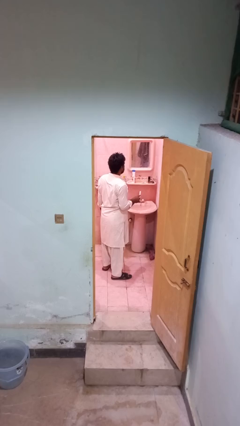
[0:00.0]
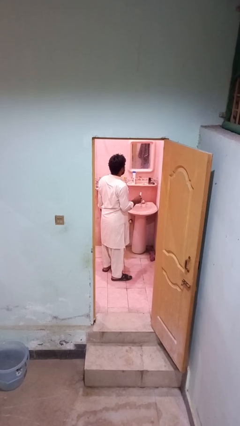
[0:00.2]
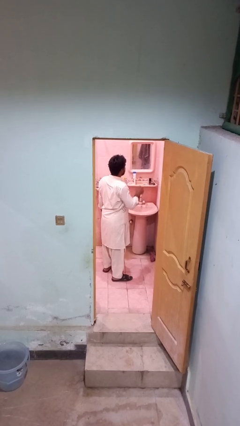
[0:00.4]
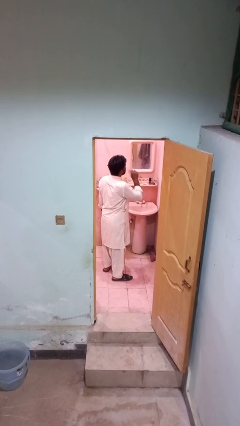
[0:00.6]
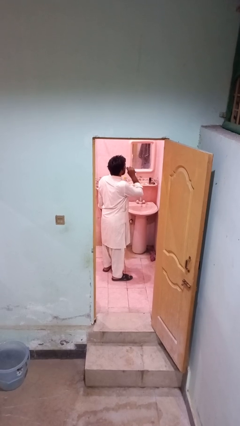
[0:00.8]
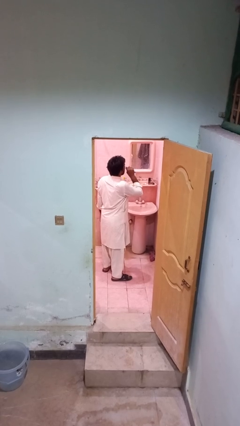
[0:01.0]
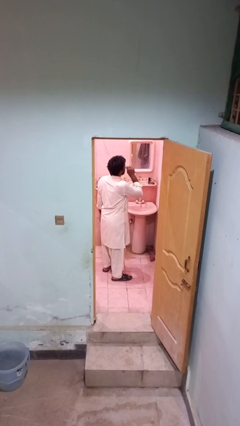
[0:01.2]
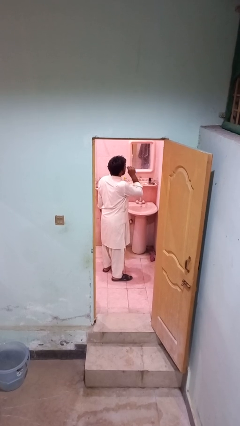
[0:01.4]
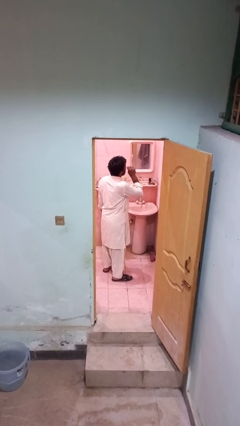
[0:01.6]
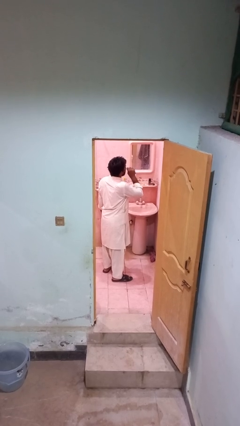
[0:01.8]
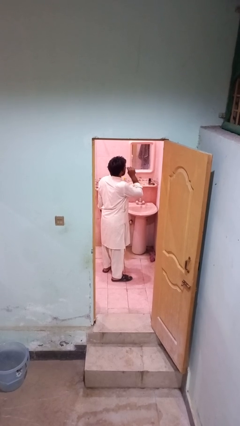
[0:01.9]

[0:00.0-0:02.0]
person flosses

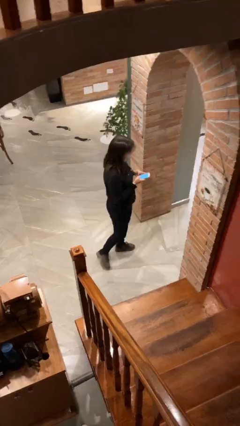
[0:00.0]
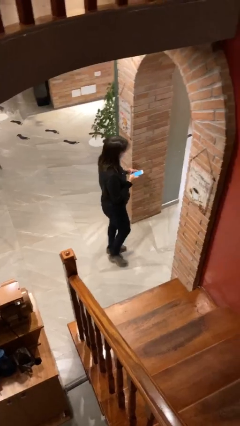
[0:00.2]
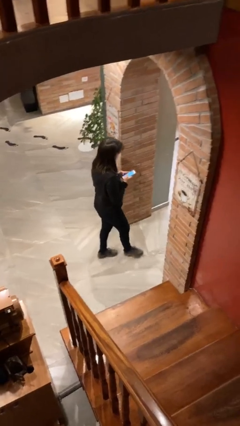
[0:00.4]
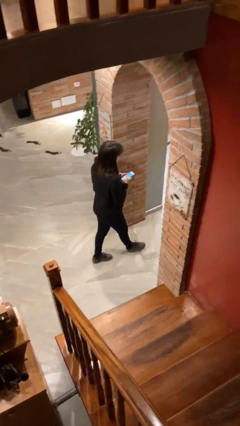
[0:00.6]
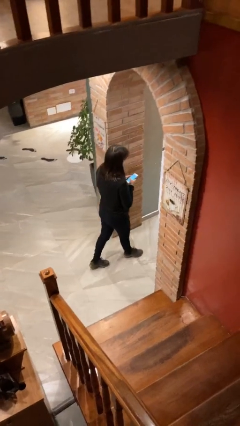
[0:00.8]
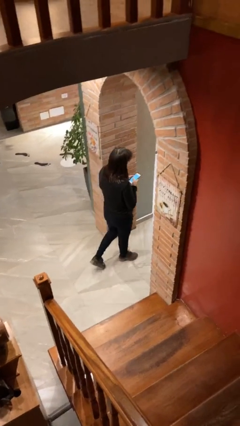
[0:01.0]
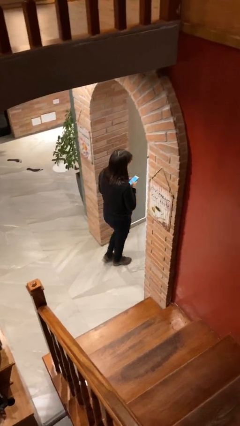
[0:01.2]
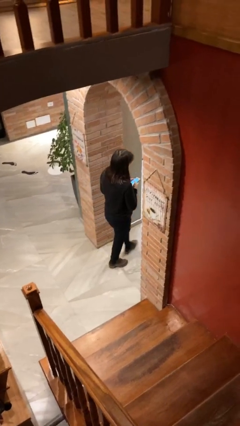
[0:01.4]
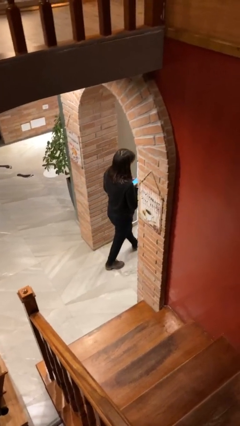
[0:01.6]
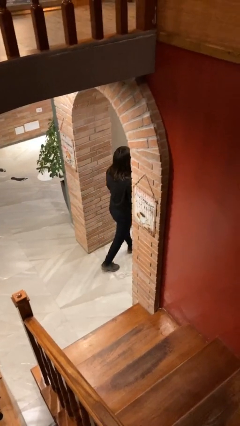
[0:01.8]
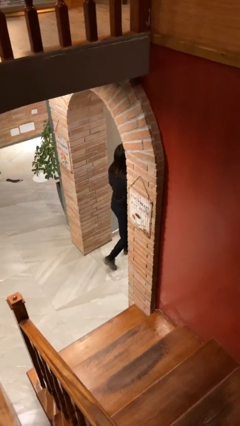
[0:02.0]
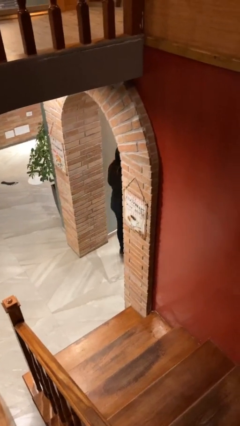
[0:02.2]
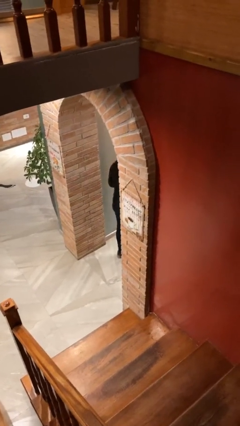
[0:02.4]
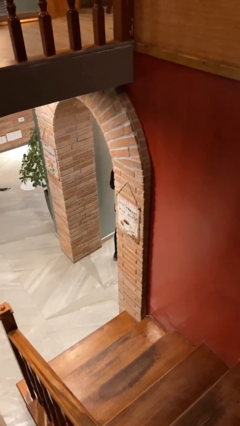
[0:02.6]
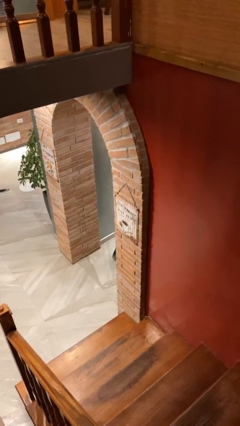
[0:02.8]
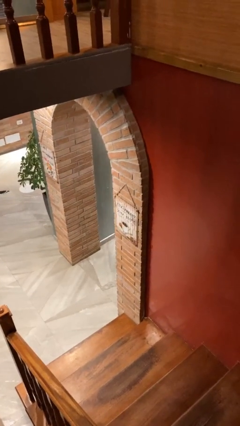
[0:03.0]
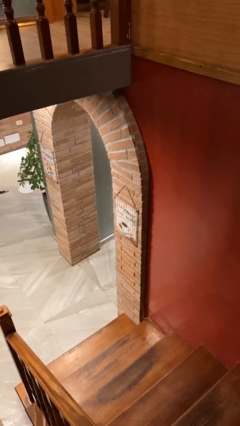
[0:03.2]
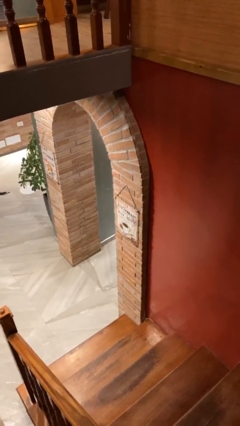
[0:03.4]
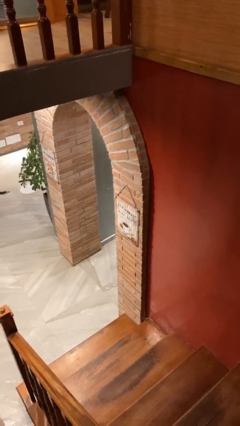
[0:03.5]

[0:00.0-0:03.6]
person exits scene through structure

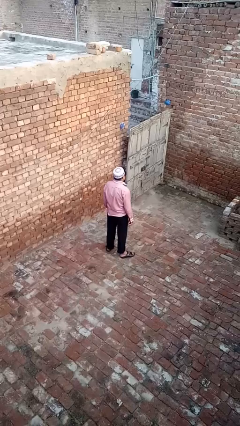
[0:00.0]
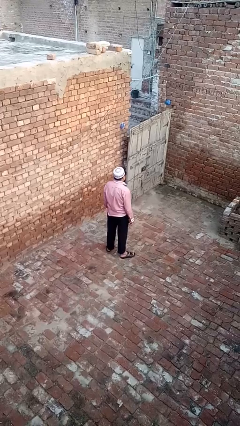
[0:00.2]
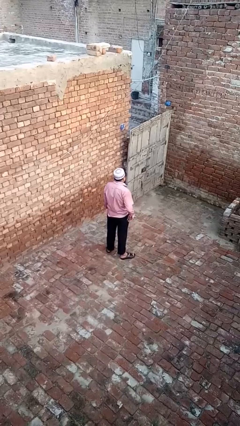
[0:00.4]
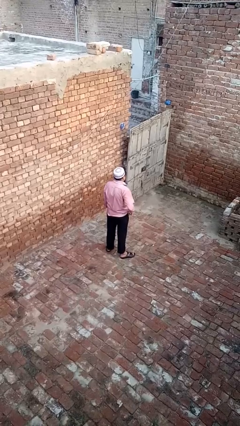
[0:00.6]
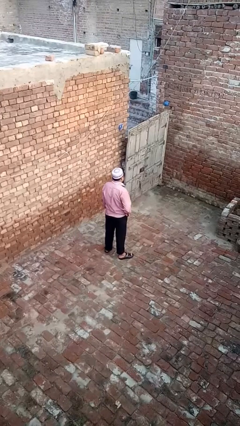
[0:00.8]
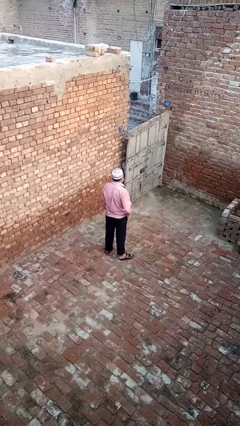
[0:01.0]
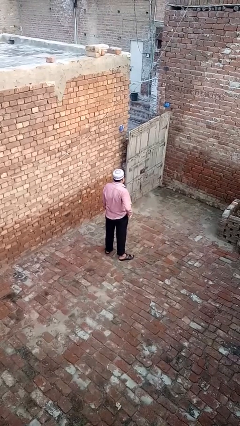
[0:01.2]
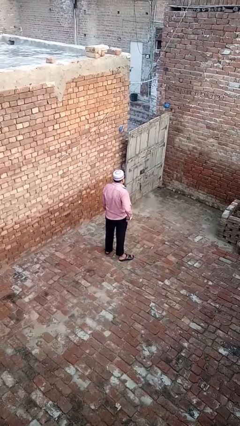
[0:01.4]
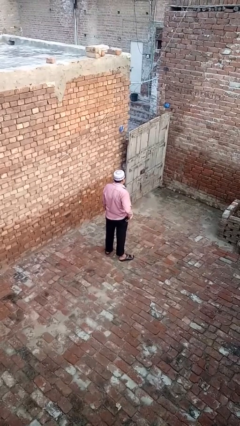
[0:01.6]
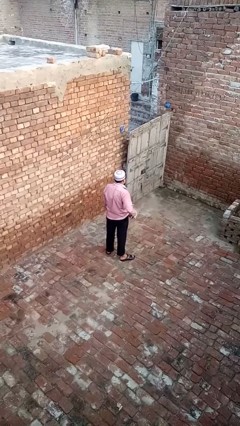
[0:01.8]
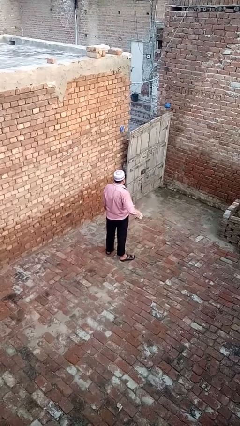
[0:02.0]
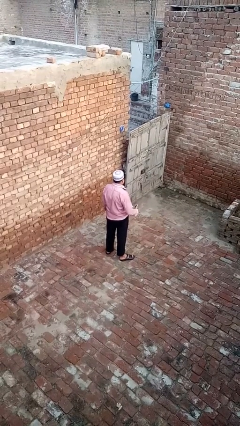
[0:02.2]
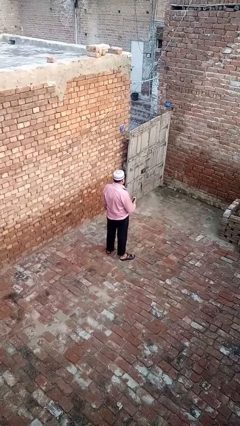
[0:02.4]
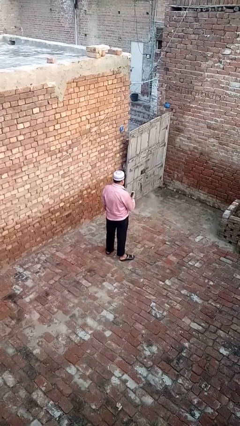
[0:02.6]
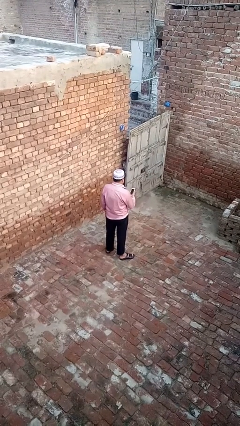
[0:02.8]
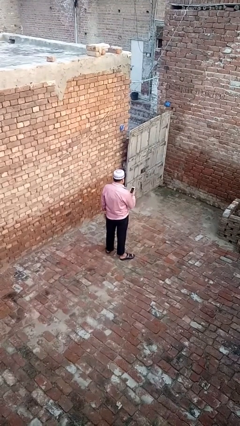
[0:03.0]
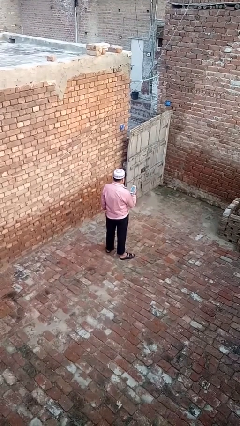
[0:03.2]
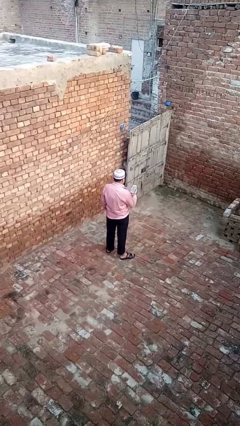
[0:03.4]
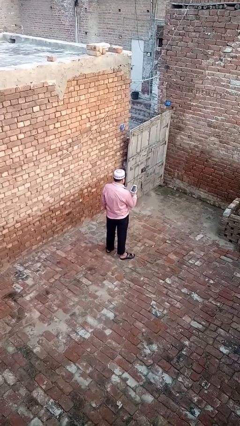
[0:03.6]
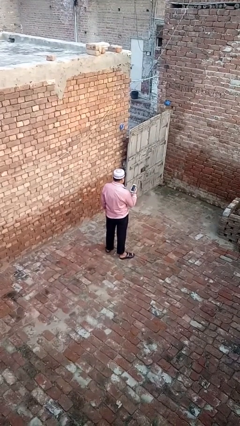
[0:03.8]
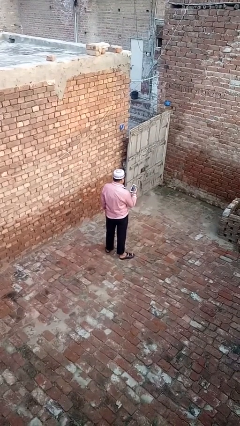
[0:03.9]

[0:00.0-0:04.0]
person takes phone from pocket

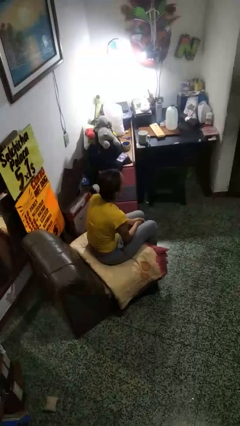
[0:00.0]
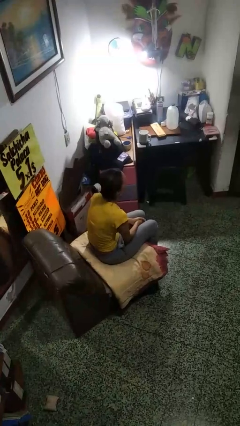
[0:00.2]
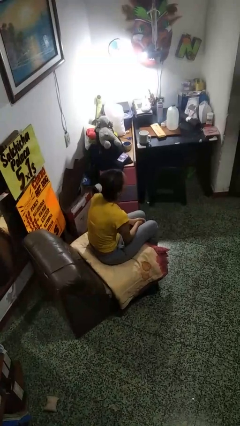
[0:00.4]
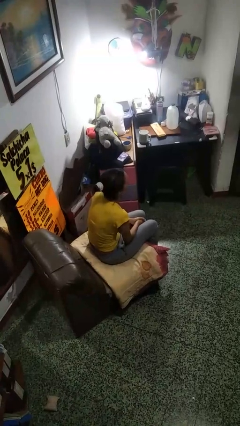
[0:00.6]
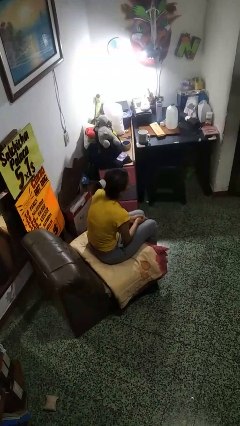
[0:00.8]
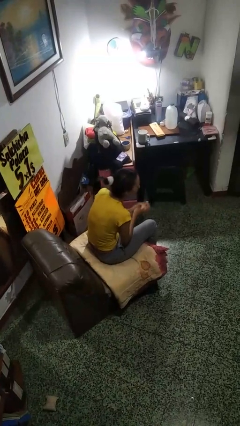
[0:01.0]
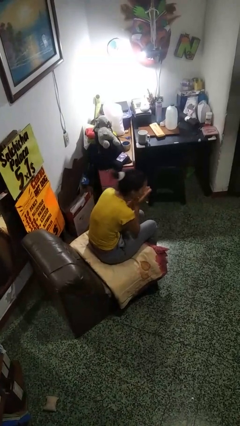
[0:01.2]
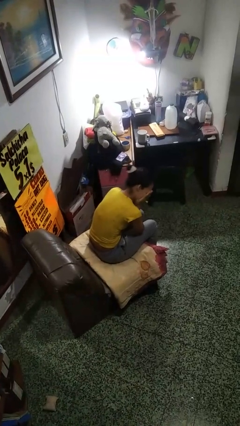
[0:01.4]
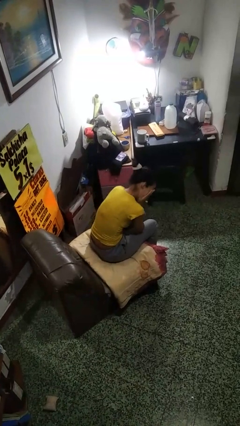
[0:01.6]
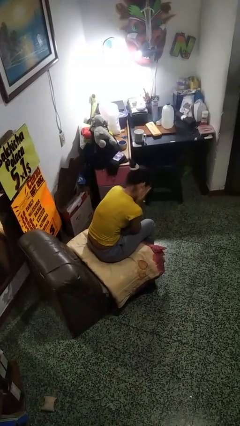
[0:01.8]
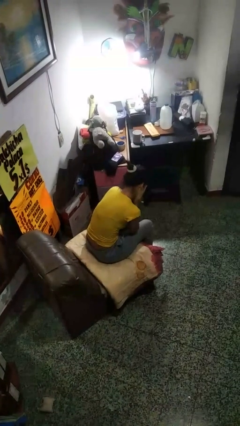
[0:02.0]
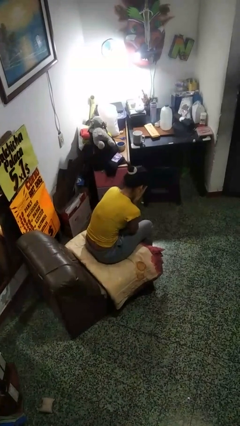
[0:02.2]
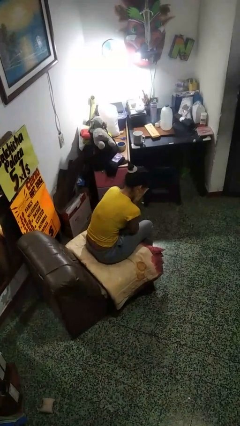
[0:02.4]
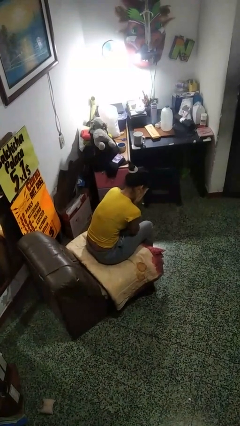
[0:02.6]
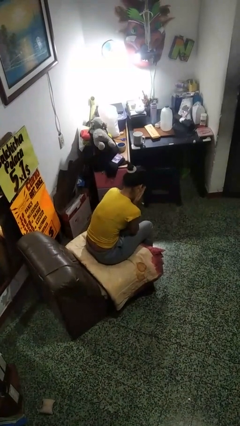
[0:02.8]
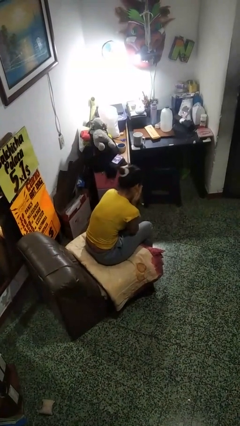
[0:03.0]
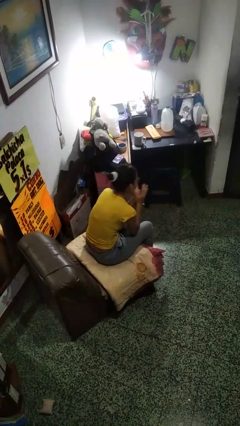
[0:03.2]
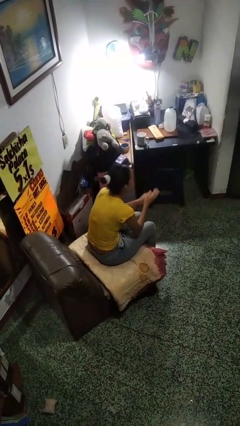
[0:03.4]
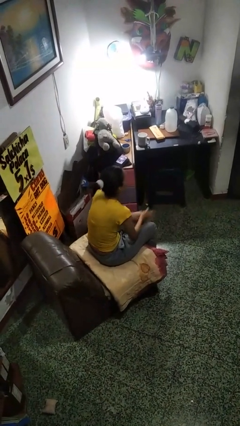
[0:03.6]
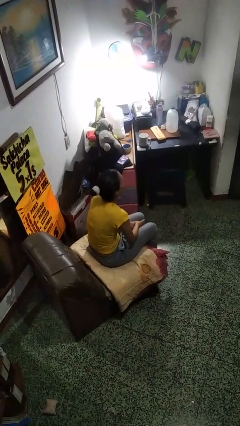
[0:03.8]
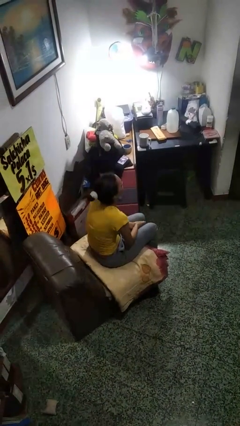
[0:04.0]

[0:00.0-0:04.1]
person covers face with hands

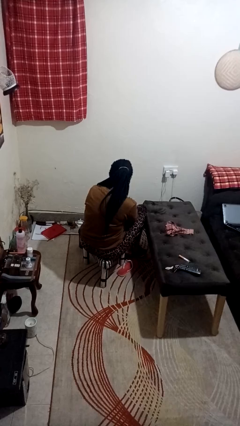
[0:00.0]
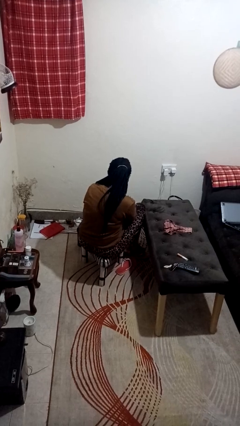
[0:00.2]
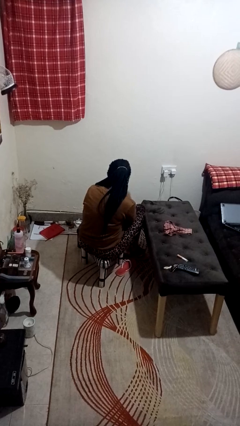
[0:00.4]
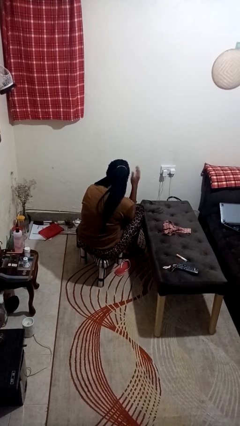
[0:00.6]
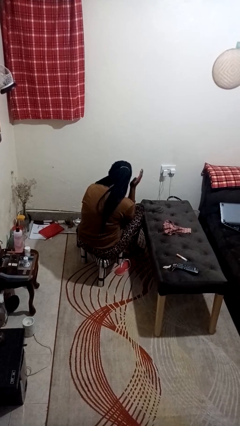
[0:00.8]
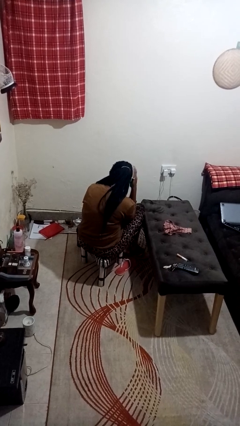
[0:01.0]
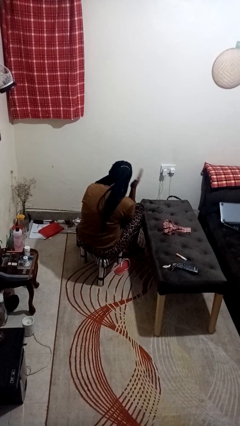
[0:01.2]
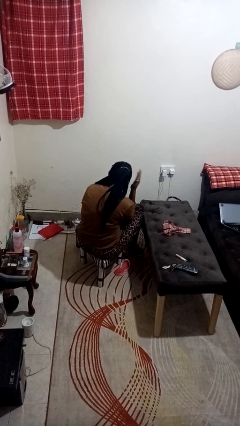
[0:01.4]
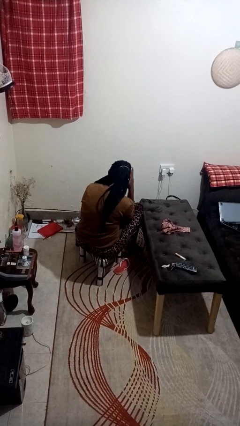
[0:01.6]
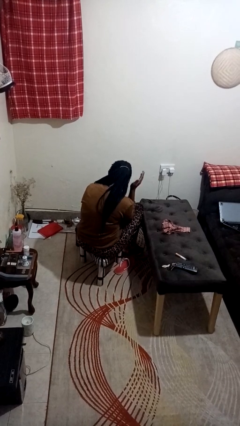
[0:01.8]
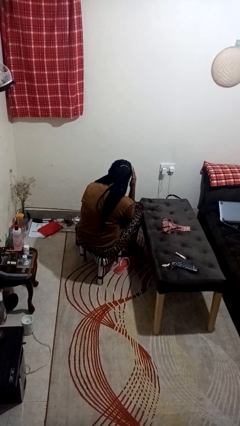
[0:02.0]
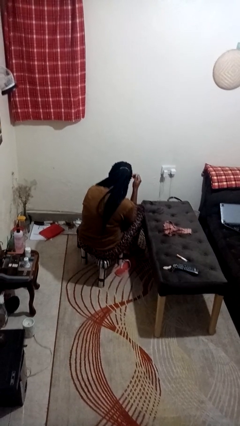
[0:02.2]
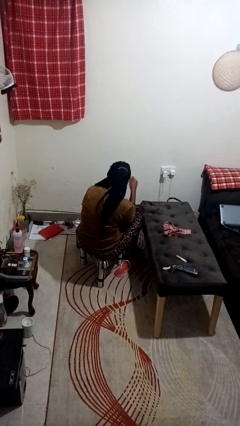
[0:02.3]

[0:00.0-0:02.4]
person pats head

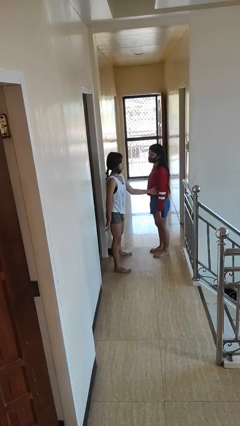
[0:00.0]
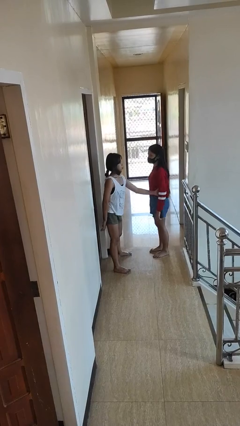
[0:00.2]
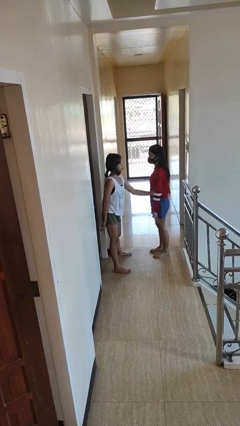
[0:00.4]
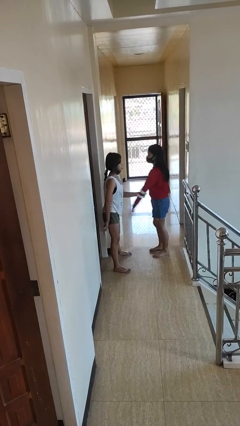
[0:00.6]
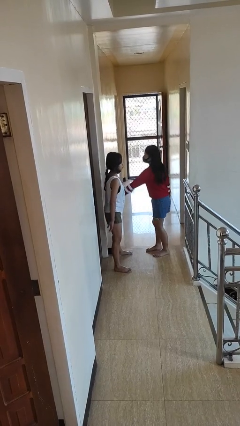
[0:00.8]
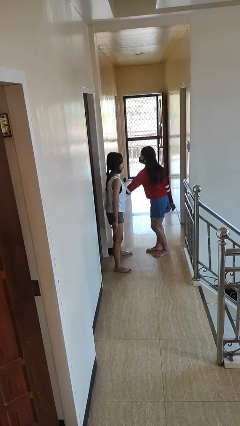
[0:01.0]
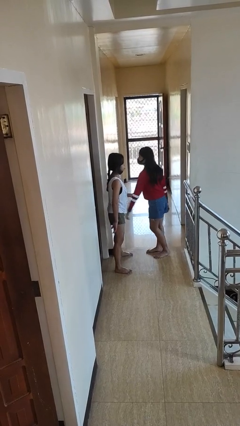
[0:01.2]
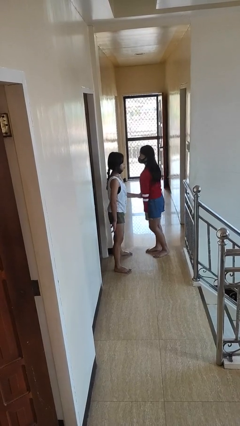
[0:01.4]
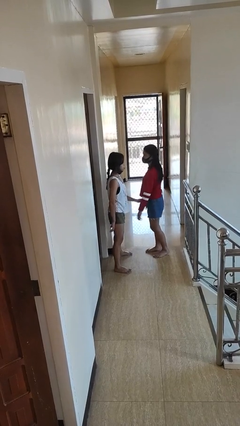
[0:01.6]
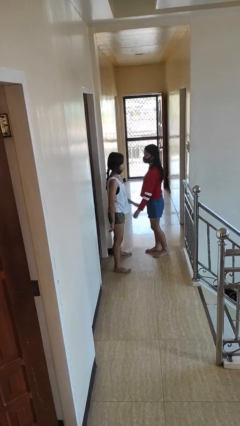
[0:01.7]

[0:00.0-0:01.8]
person grabs person by forearm
